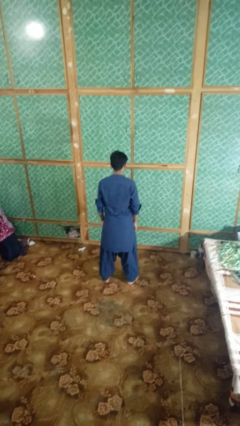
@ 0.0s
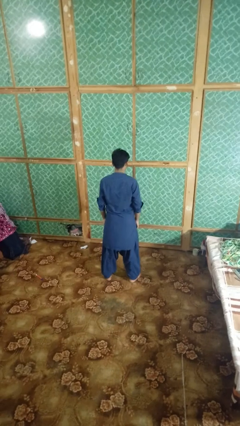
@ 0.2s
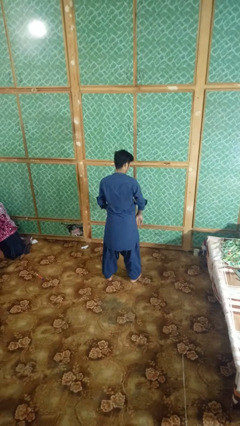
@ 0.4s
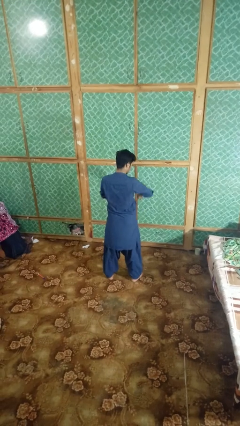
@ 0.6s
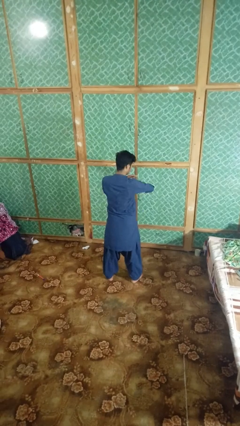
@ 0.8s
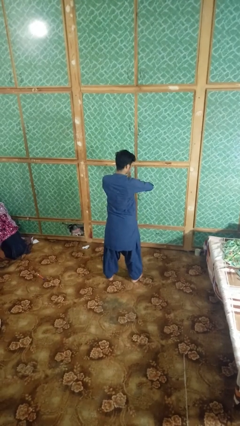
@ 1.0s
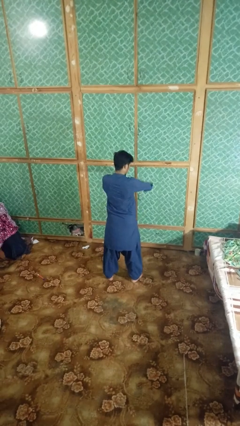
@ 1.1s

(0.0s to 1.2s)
person swats bug

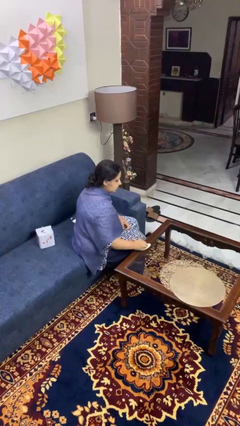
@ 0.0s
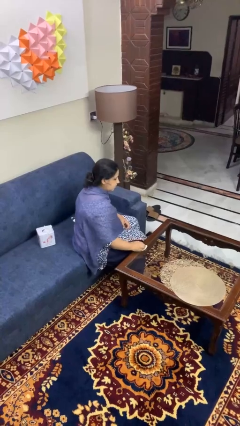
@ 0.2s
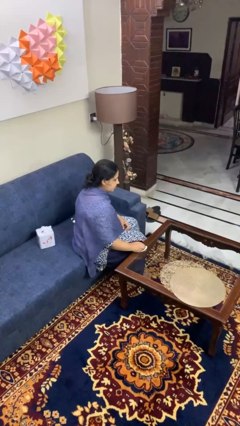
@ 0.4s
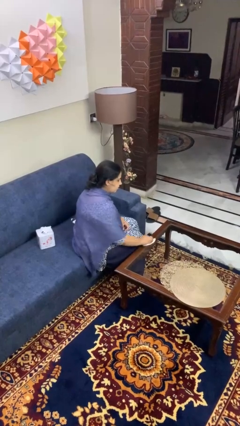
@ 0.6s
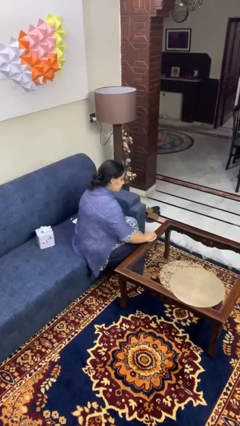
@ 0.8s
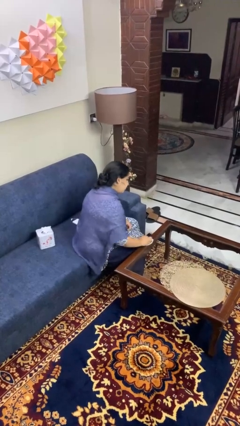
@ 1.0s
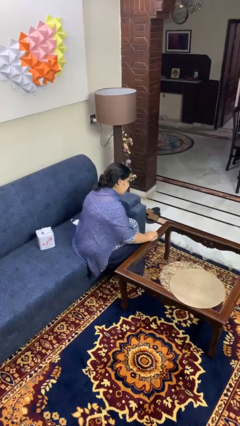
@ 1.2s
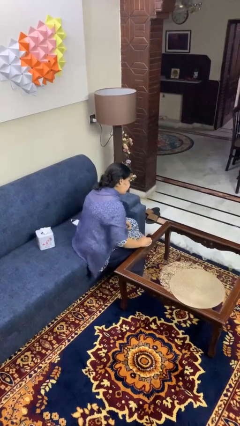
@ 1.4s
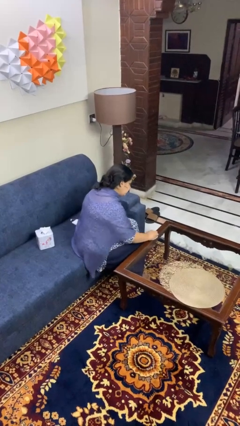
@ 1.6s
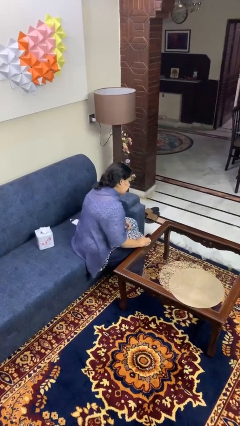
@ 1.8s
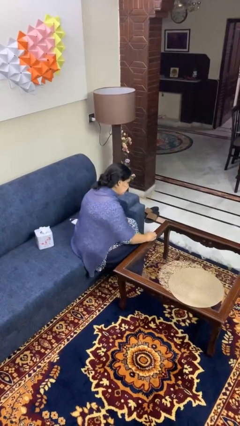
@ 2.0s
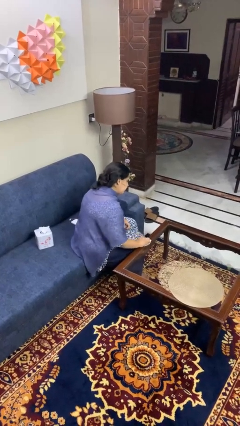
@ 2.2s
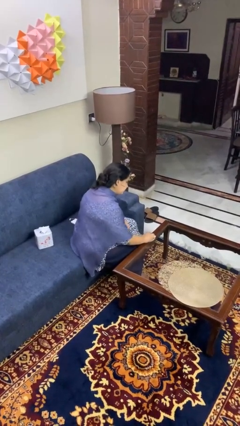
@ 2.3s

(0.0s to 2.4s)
person cleans table with rag

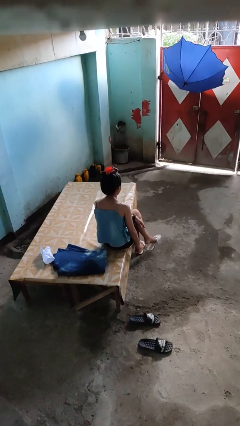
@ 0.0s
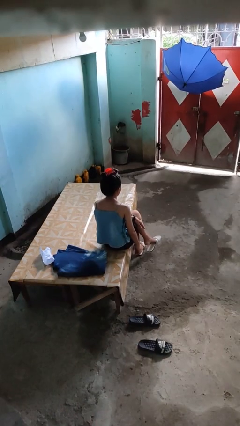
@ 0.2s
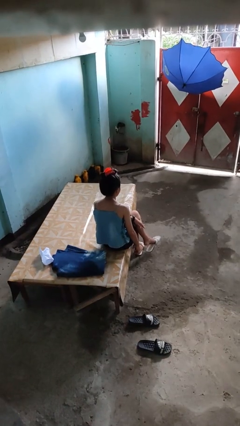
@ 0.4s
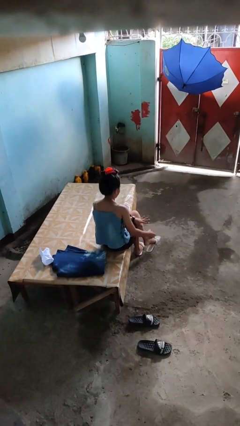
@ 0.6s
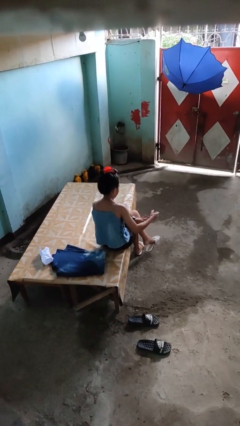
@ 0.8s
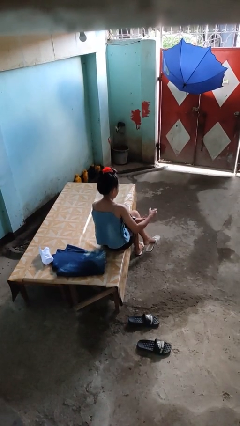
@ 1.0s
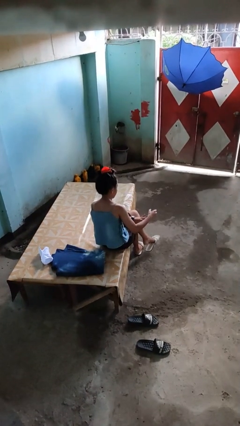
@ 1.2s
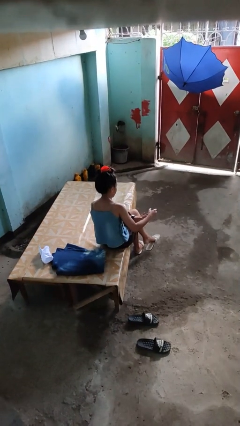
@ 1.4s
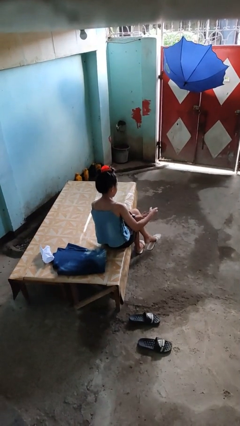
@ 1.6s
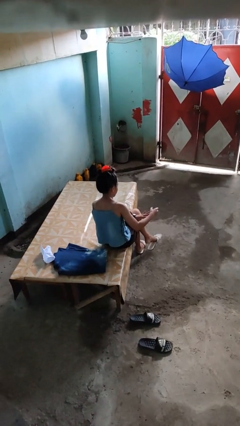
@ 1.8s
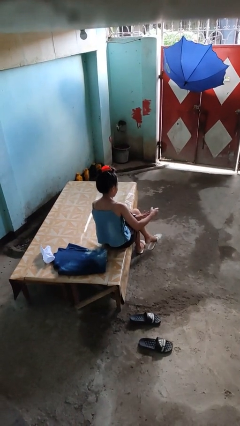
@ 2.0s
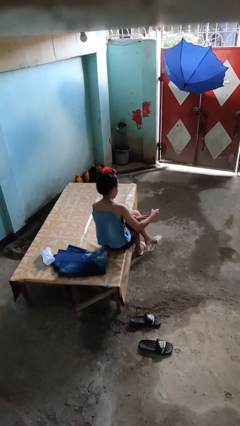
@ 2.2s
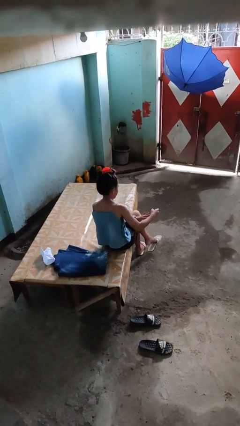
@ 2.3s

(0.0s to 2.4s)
person clips fingernails

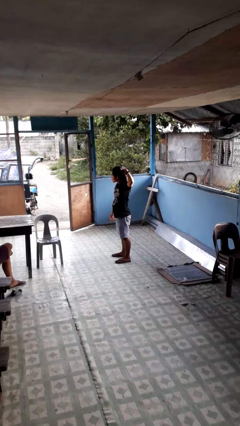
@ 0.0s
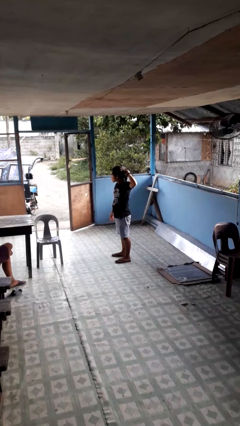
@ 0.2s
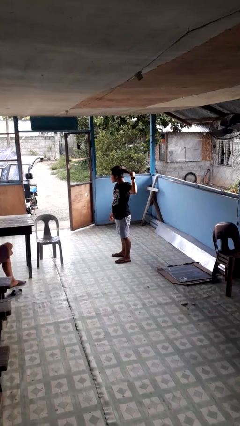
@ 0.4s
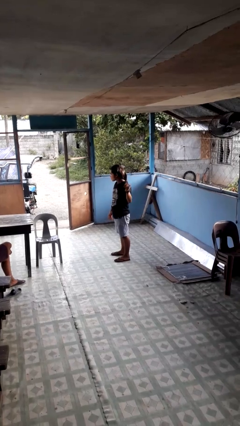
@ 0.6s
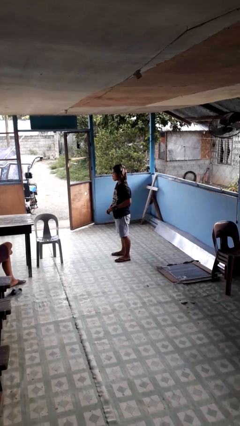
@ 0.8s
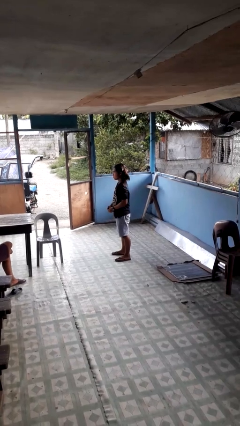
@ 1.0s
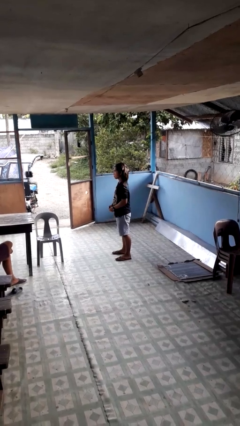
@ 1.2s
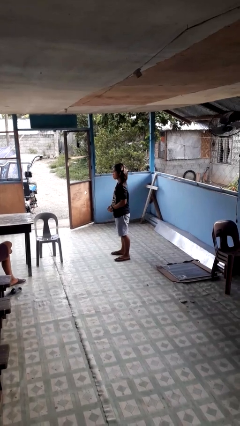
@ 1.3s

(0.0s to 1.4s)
person takes off hairtie

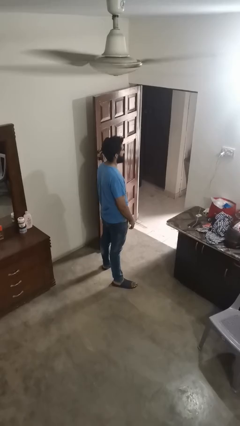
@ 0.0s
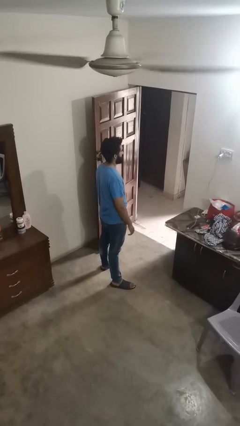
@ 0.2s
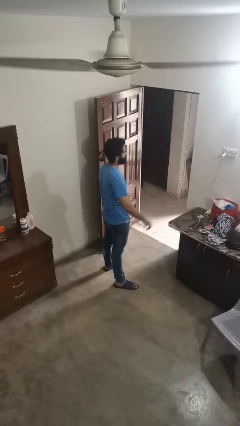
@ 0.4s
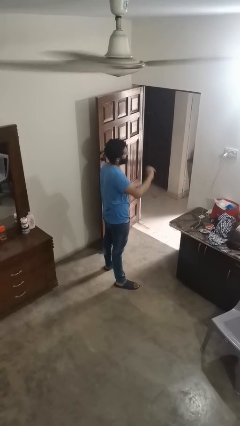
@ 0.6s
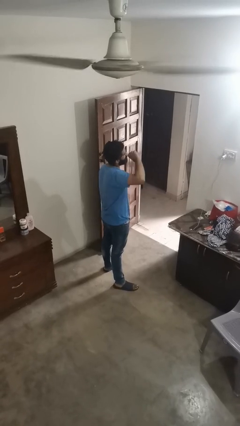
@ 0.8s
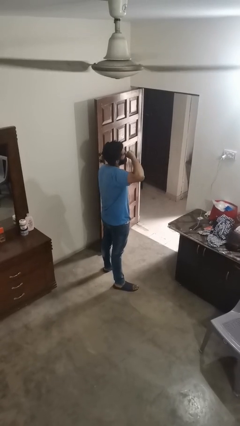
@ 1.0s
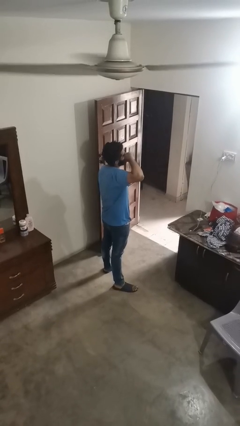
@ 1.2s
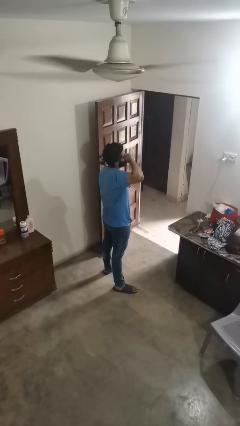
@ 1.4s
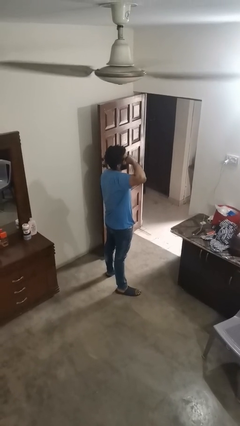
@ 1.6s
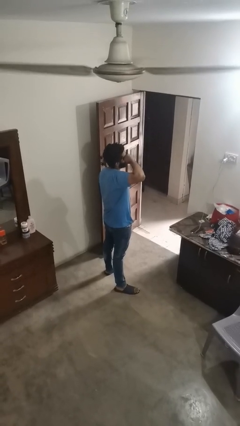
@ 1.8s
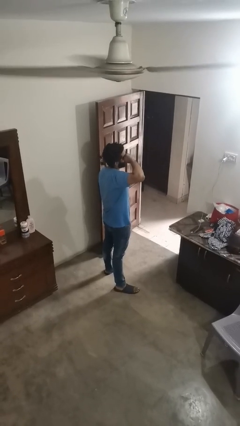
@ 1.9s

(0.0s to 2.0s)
person rubs eyes

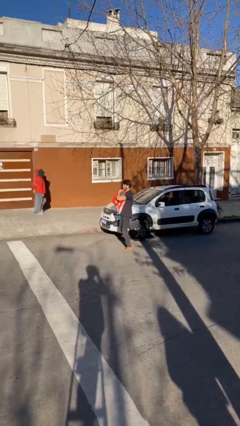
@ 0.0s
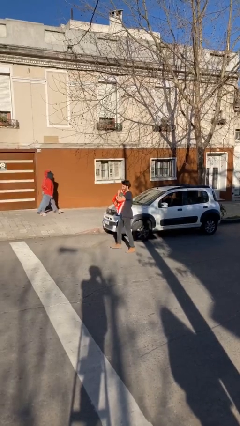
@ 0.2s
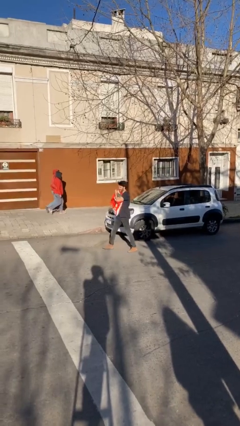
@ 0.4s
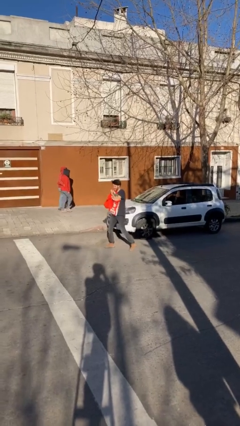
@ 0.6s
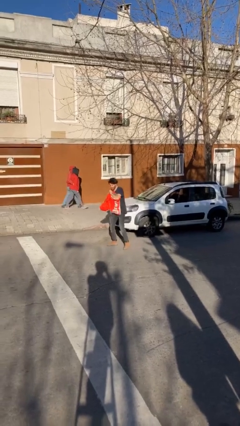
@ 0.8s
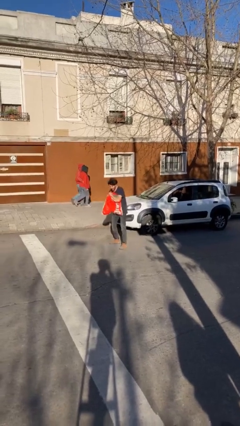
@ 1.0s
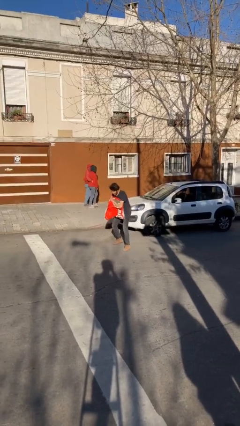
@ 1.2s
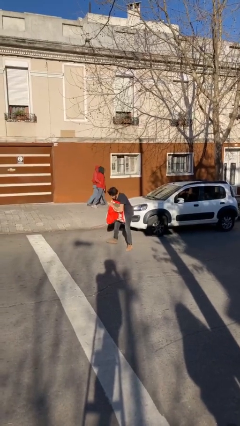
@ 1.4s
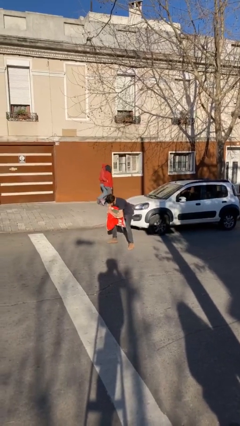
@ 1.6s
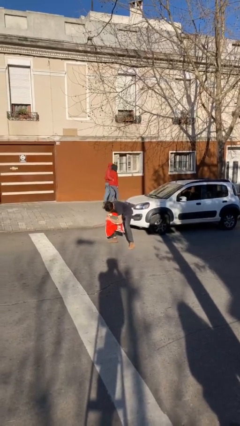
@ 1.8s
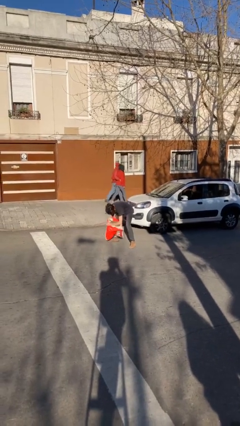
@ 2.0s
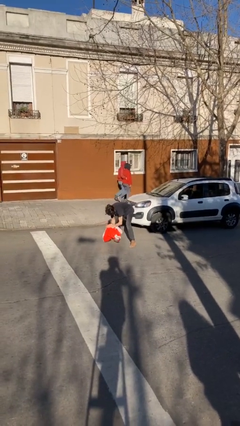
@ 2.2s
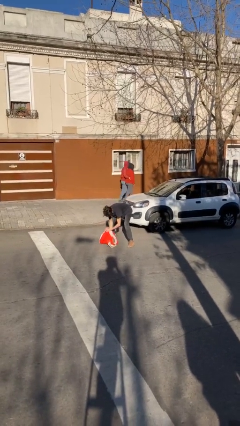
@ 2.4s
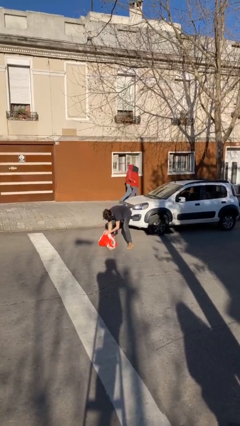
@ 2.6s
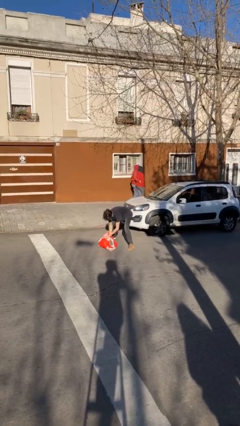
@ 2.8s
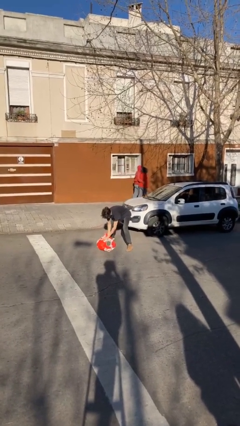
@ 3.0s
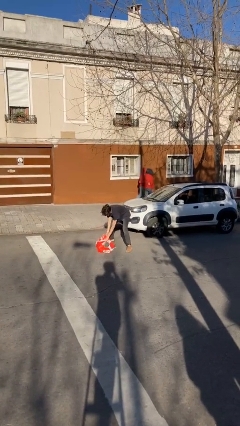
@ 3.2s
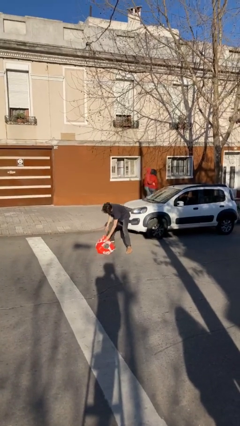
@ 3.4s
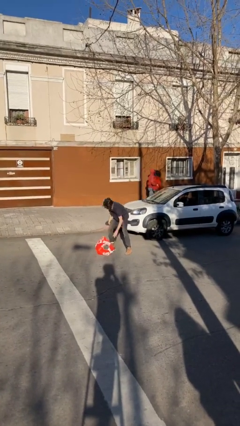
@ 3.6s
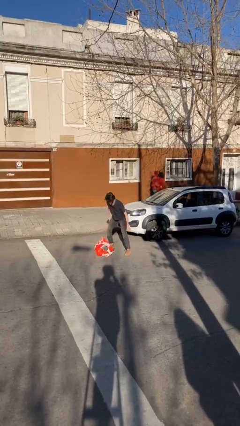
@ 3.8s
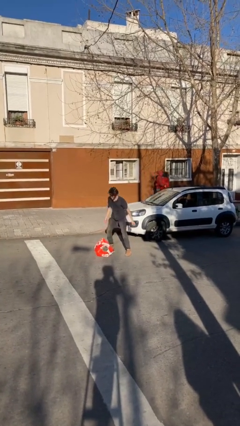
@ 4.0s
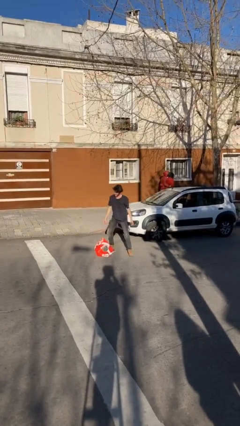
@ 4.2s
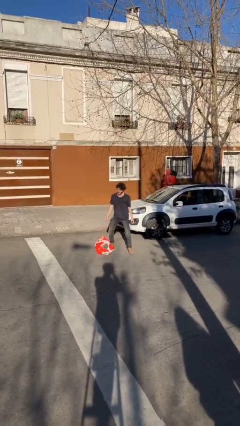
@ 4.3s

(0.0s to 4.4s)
person puts down object on floor

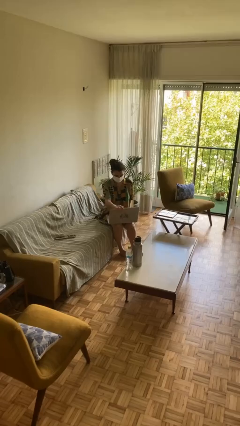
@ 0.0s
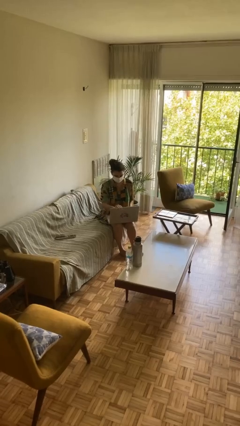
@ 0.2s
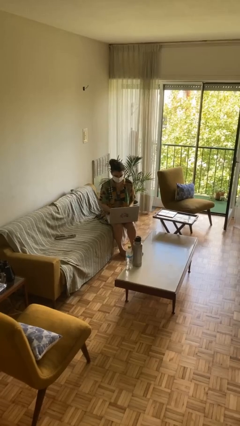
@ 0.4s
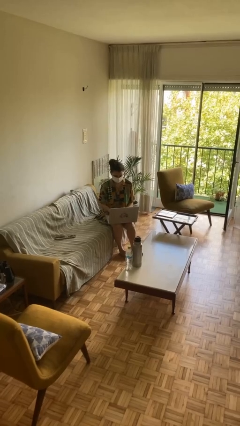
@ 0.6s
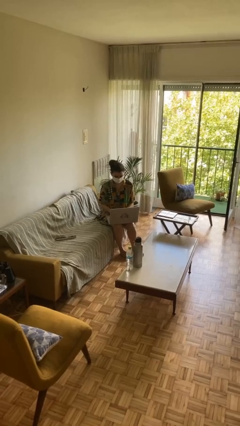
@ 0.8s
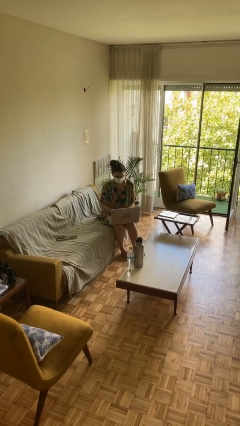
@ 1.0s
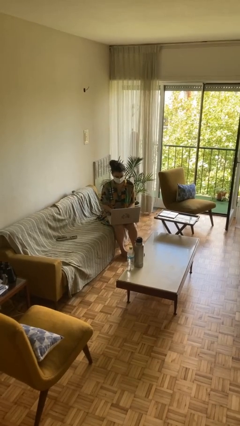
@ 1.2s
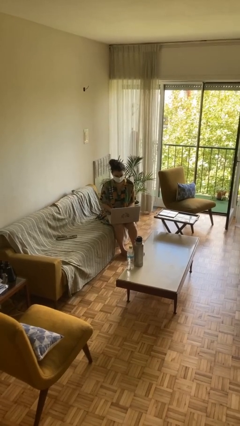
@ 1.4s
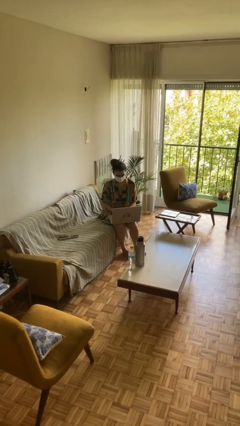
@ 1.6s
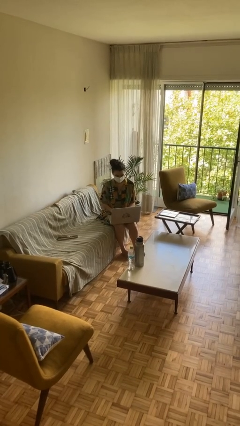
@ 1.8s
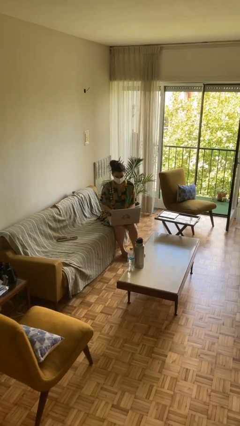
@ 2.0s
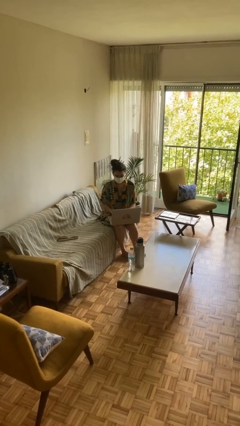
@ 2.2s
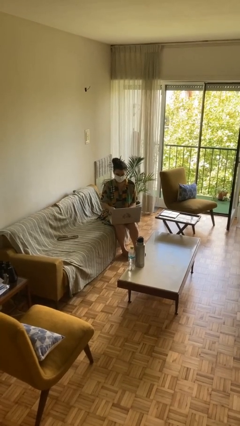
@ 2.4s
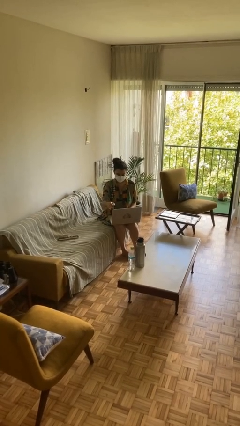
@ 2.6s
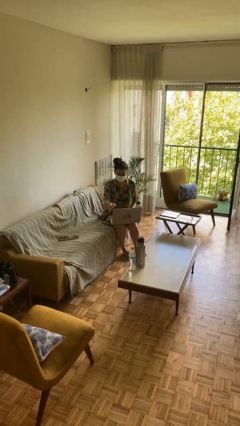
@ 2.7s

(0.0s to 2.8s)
person interacts with laptop

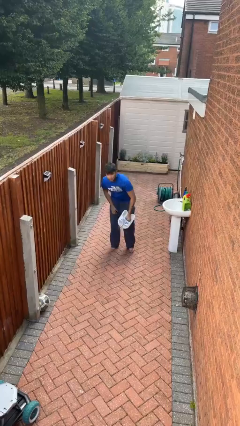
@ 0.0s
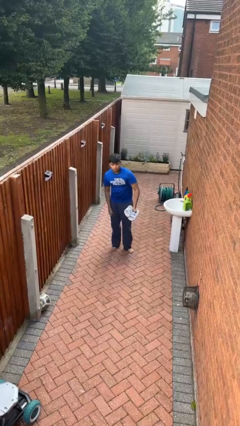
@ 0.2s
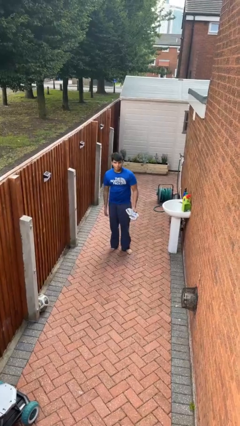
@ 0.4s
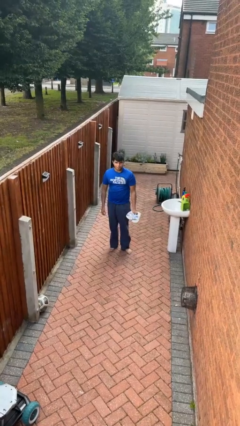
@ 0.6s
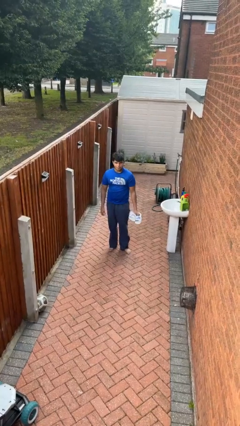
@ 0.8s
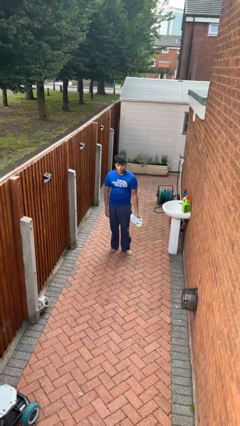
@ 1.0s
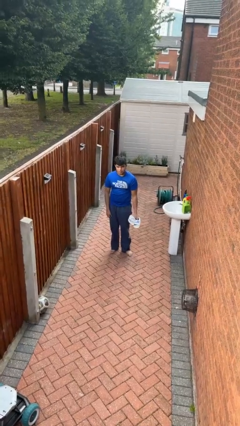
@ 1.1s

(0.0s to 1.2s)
person puts on shoes
